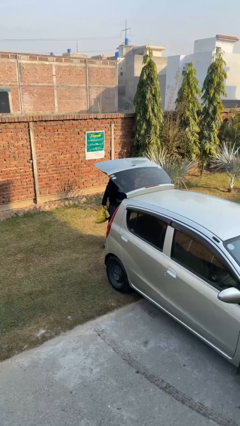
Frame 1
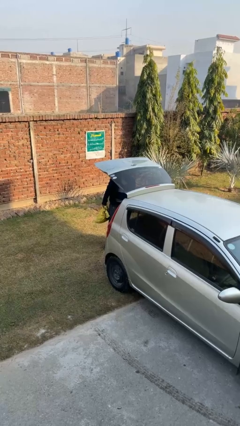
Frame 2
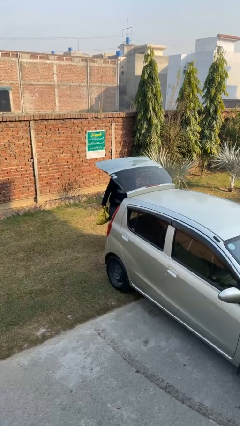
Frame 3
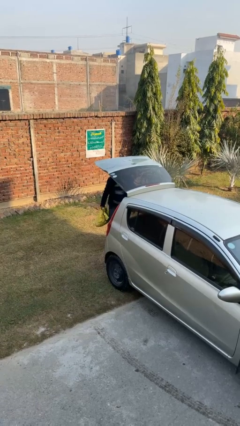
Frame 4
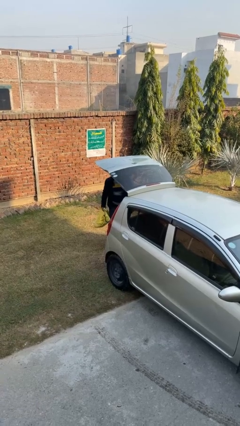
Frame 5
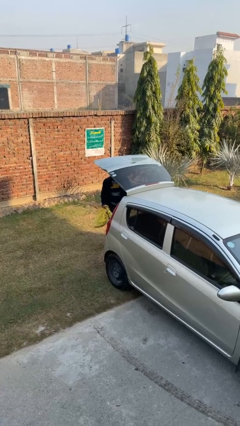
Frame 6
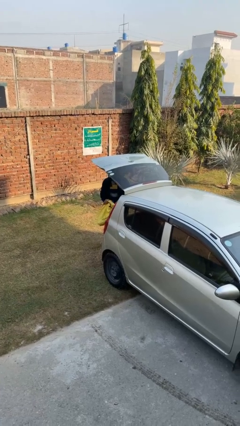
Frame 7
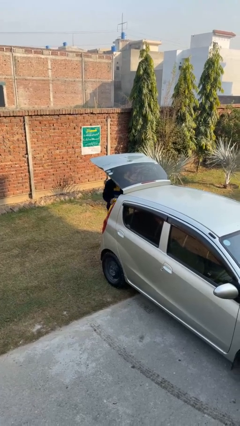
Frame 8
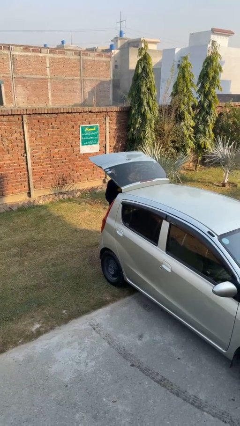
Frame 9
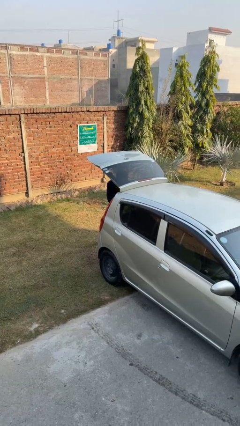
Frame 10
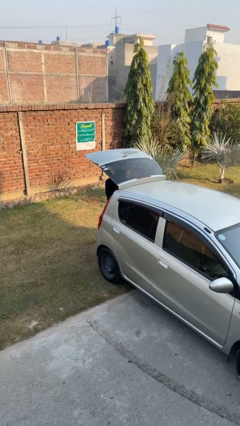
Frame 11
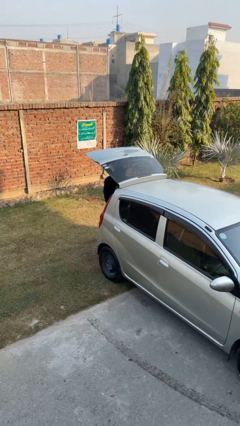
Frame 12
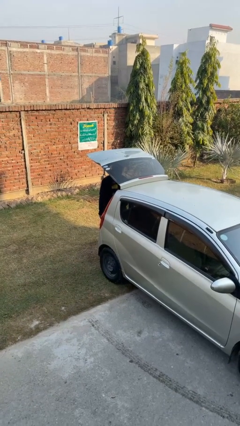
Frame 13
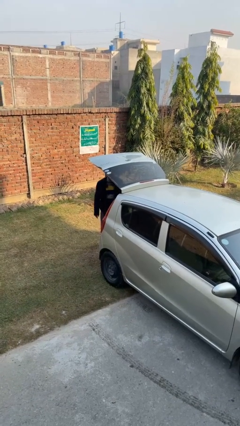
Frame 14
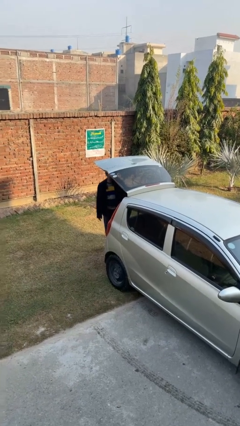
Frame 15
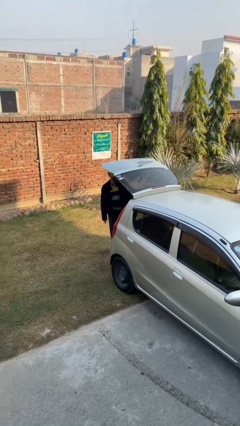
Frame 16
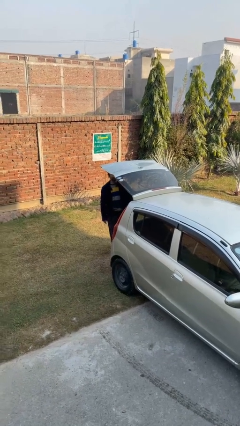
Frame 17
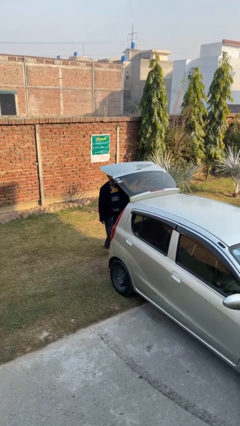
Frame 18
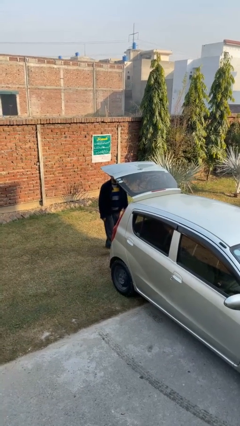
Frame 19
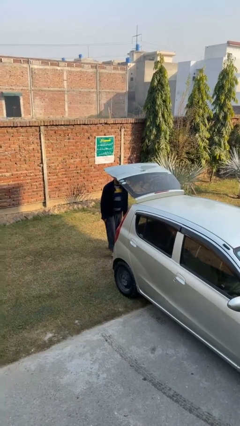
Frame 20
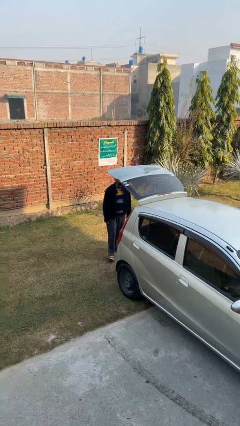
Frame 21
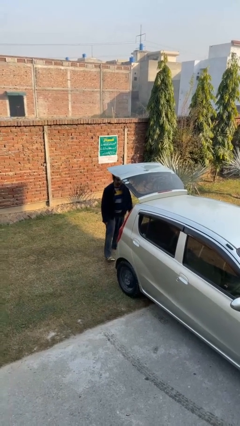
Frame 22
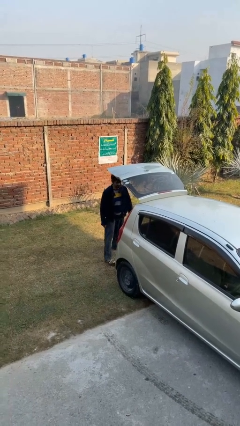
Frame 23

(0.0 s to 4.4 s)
person loads car

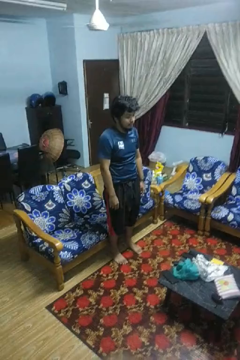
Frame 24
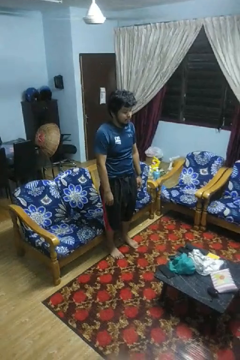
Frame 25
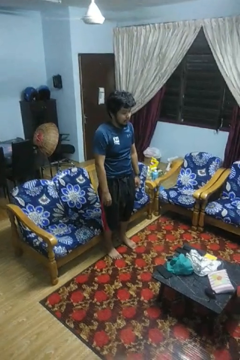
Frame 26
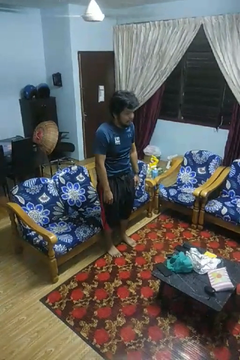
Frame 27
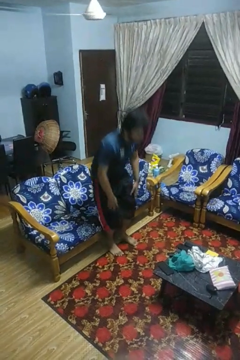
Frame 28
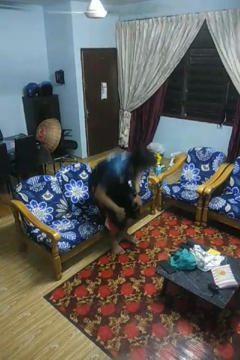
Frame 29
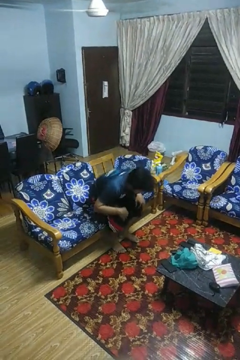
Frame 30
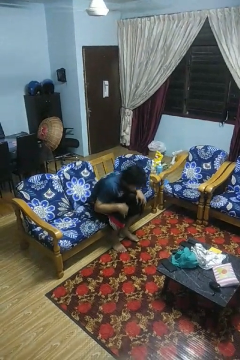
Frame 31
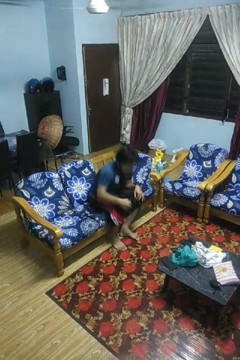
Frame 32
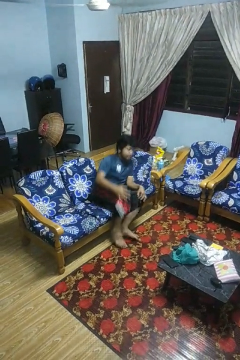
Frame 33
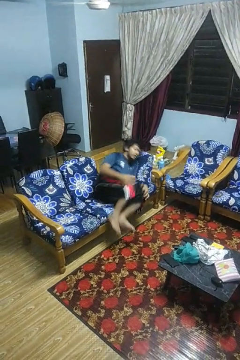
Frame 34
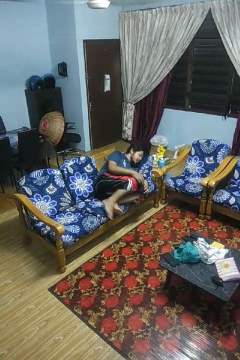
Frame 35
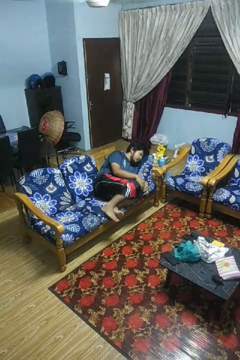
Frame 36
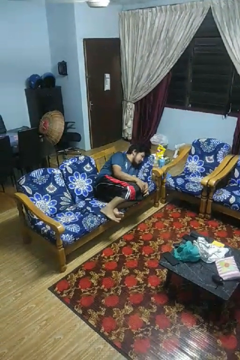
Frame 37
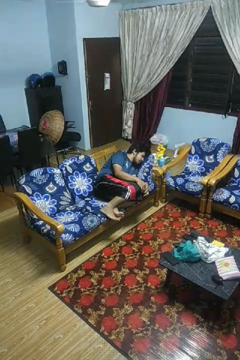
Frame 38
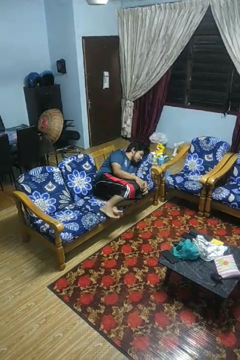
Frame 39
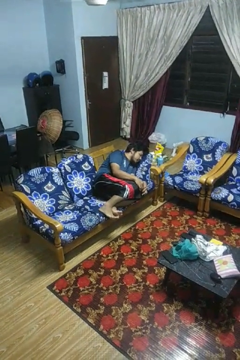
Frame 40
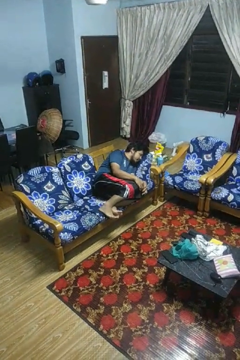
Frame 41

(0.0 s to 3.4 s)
person lies down on couch

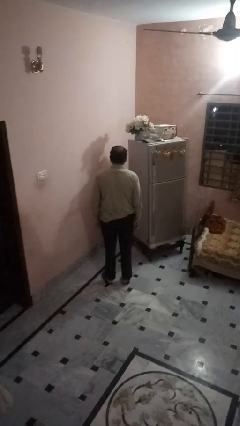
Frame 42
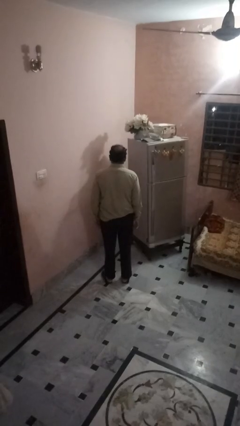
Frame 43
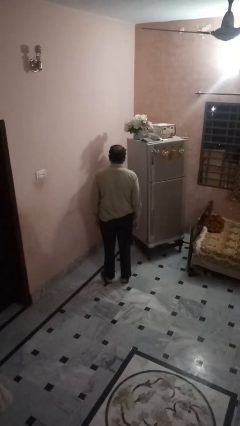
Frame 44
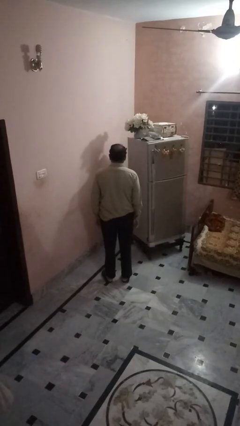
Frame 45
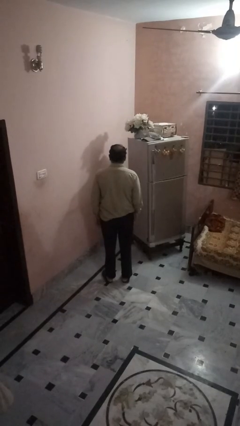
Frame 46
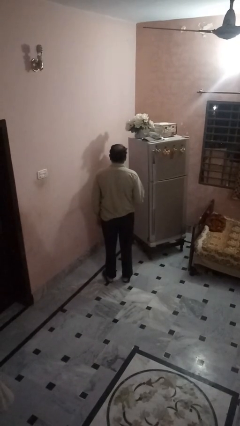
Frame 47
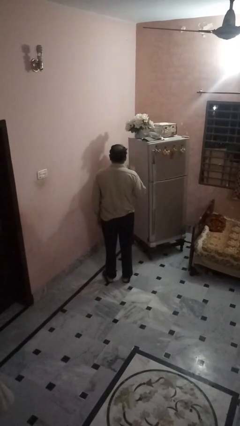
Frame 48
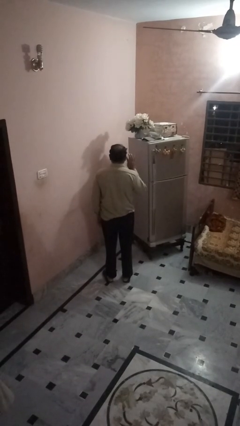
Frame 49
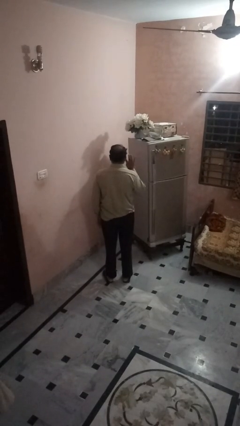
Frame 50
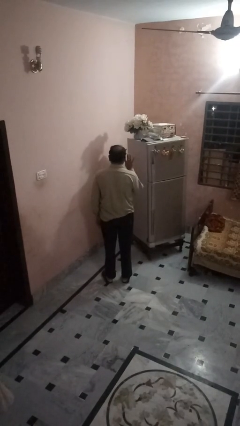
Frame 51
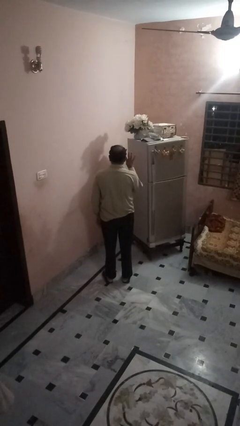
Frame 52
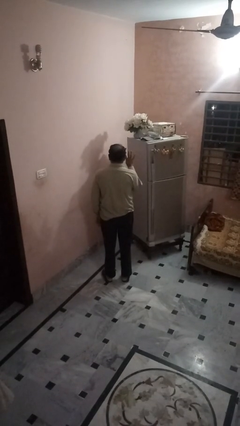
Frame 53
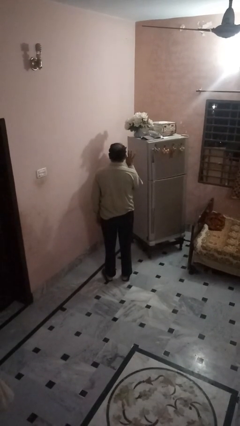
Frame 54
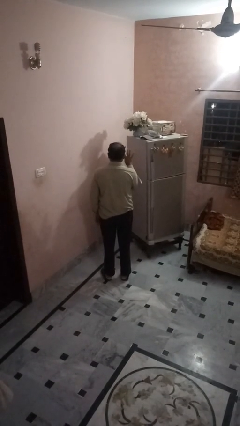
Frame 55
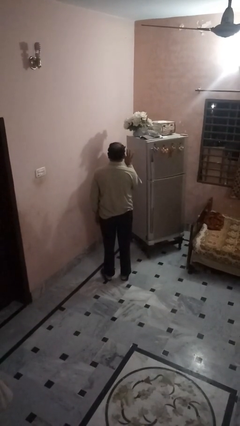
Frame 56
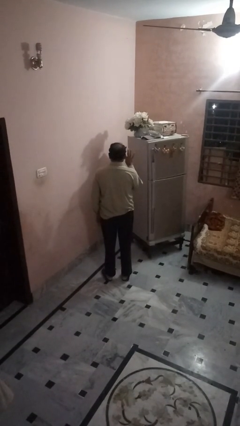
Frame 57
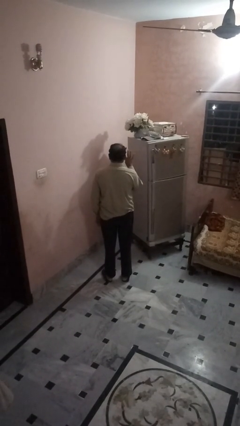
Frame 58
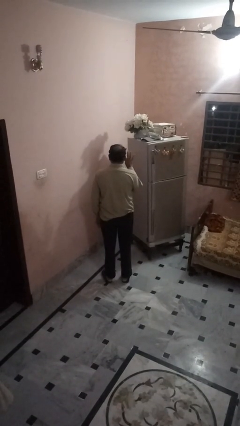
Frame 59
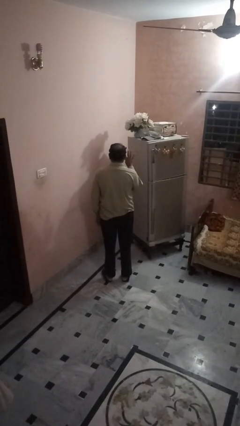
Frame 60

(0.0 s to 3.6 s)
person gestures number four

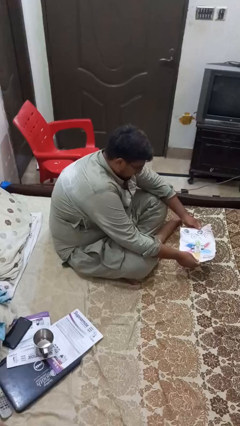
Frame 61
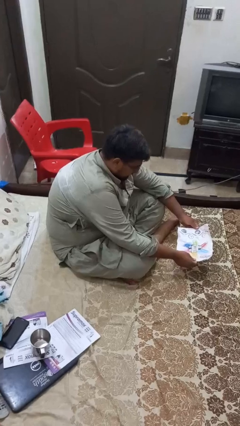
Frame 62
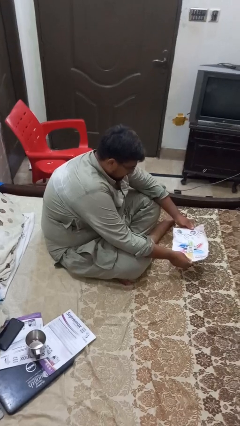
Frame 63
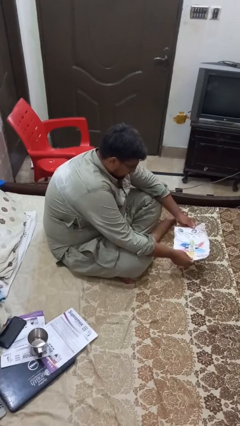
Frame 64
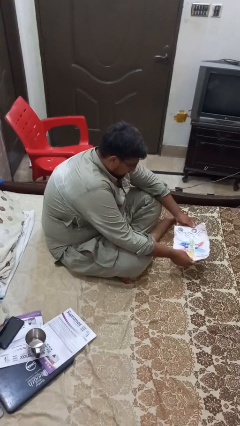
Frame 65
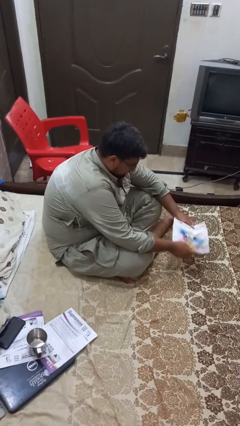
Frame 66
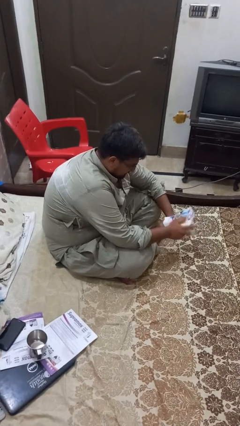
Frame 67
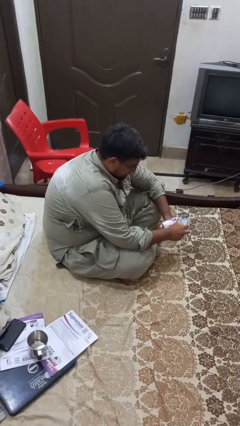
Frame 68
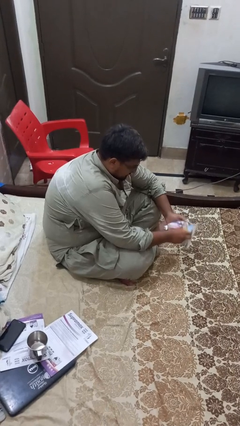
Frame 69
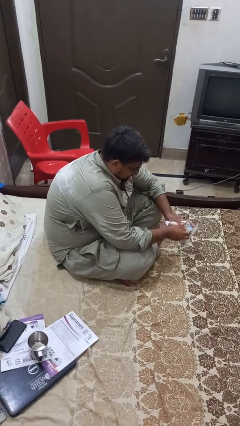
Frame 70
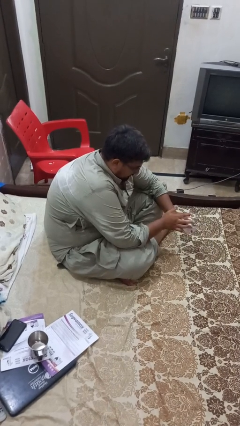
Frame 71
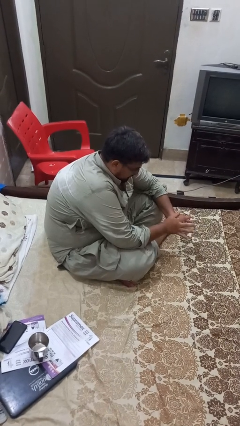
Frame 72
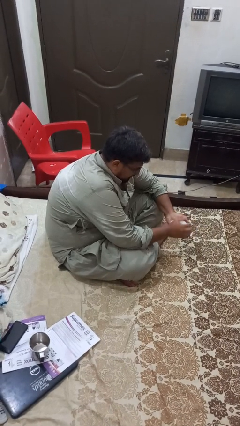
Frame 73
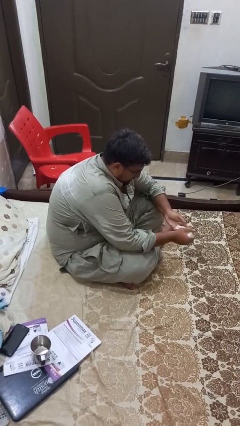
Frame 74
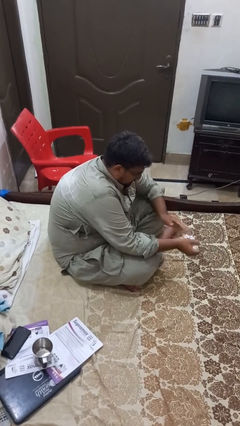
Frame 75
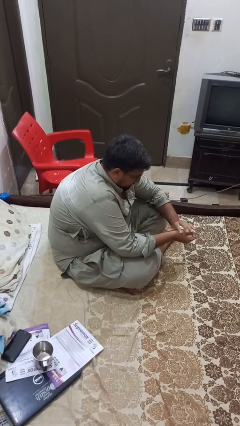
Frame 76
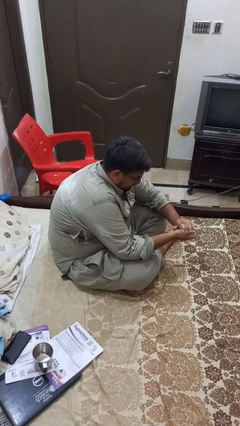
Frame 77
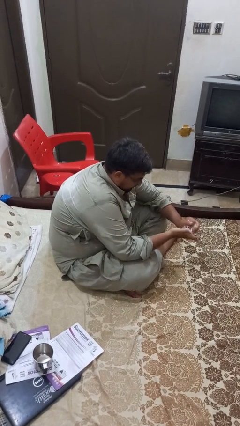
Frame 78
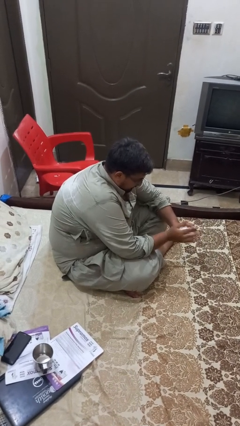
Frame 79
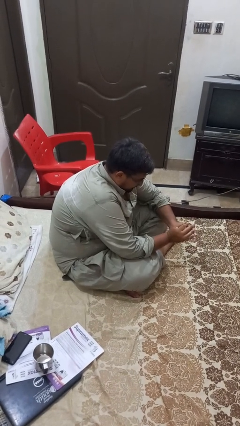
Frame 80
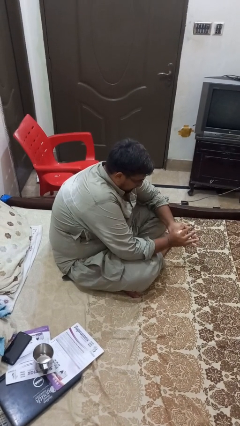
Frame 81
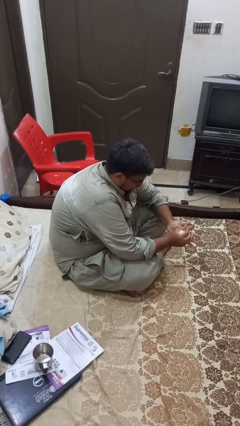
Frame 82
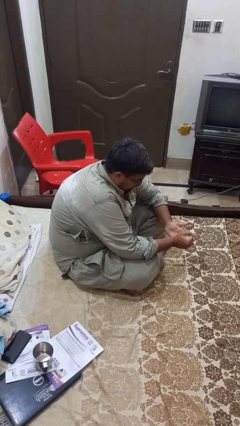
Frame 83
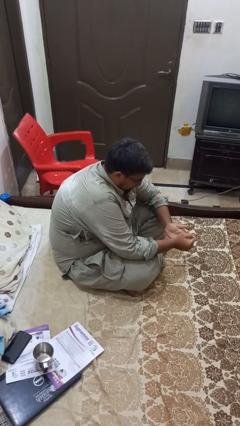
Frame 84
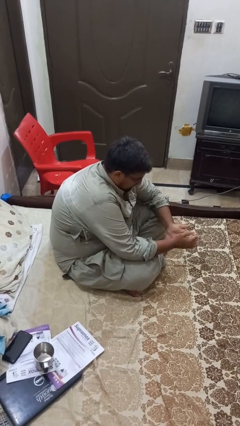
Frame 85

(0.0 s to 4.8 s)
person crumples paper

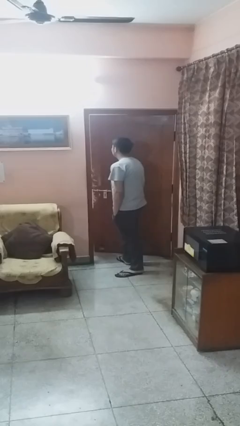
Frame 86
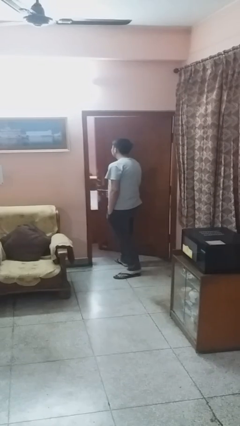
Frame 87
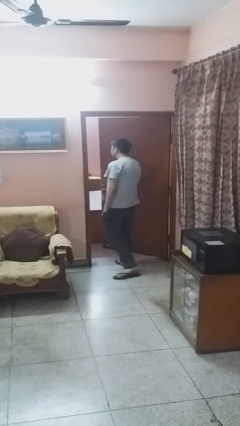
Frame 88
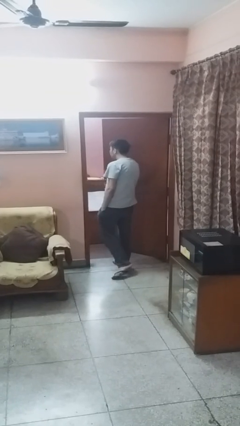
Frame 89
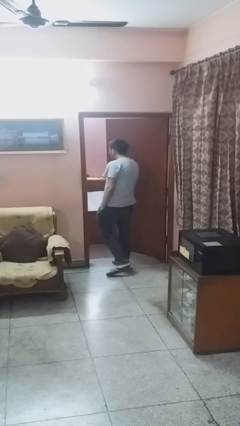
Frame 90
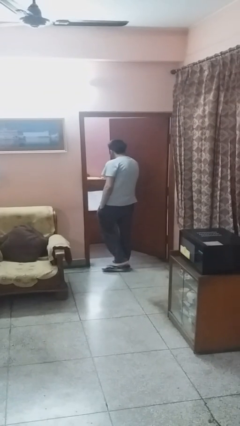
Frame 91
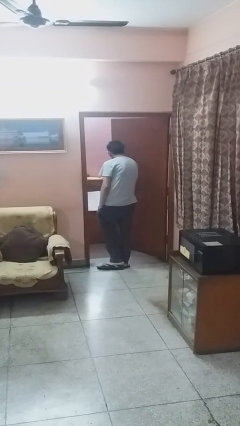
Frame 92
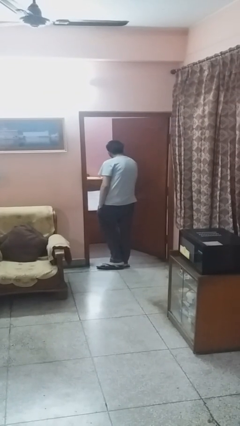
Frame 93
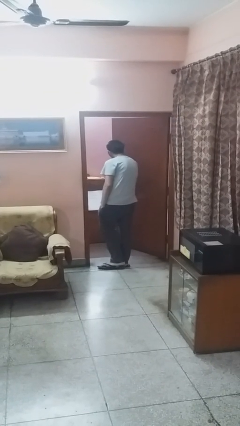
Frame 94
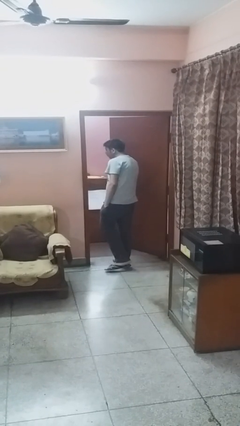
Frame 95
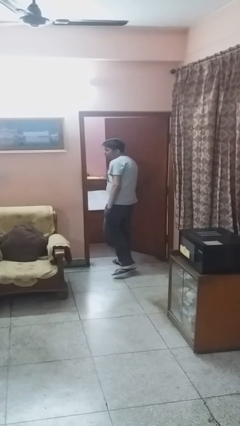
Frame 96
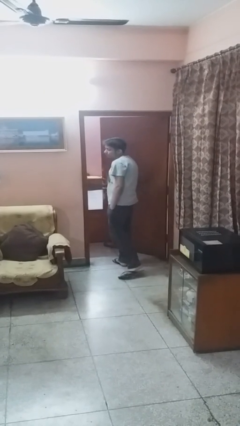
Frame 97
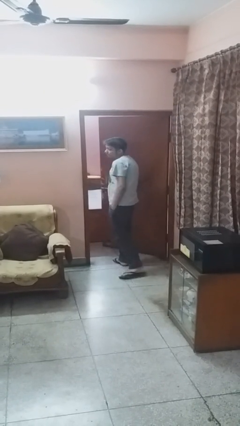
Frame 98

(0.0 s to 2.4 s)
person opens facility door
